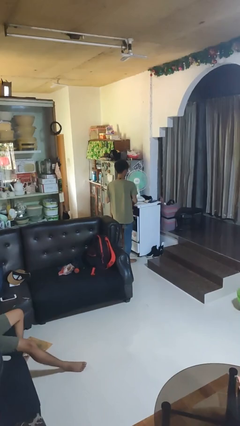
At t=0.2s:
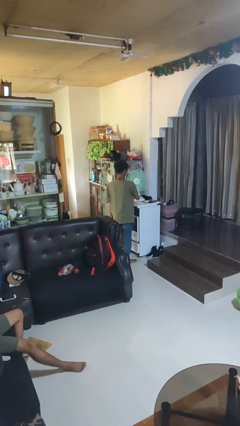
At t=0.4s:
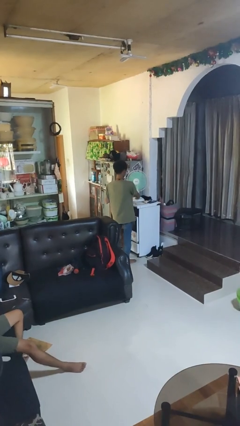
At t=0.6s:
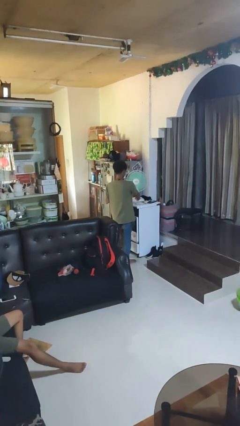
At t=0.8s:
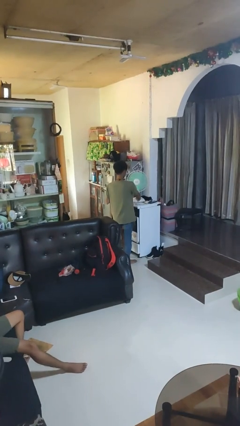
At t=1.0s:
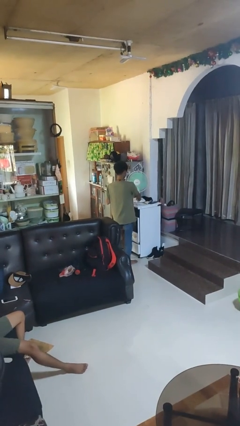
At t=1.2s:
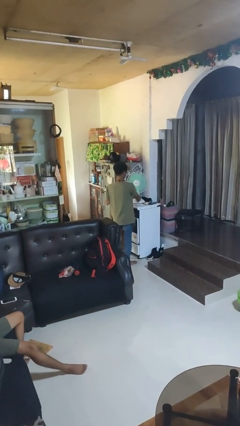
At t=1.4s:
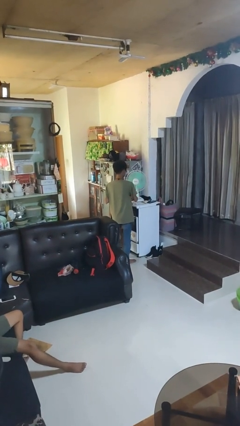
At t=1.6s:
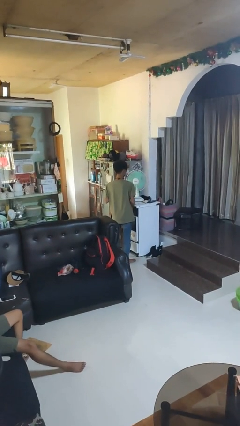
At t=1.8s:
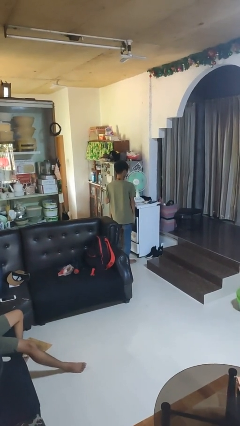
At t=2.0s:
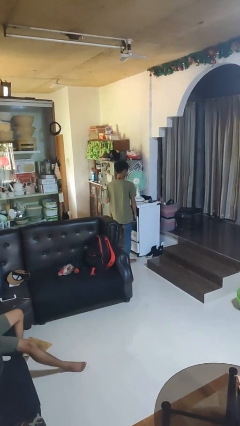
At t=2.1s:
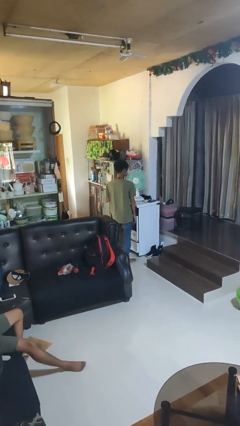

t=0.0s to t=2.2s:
person turns off fan

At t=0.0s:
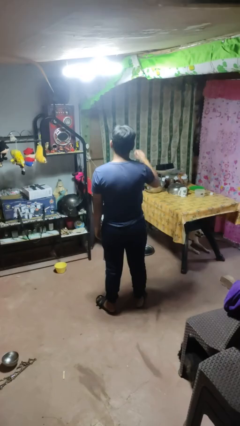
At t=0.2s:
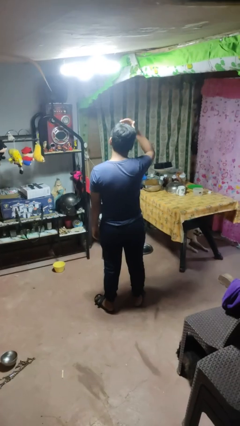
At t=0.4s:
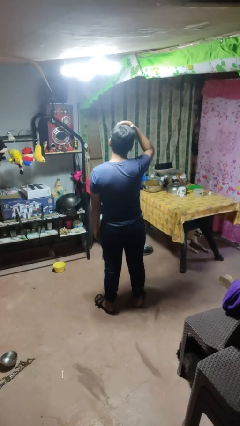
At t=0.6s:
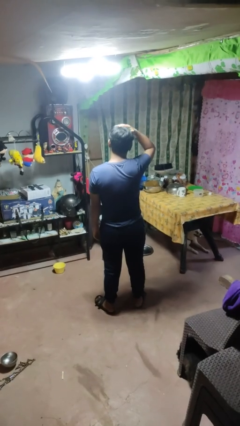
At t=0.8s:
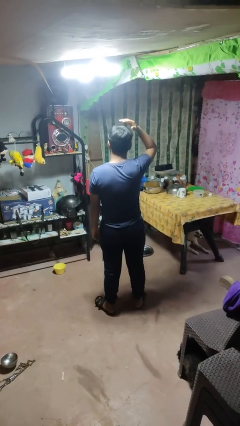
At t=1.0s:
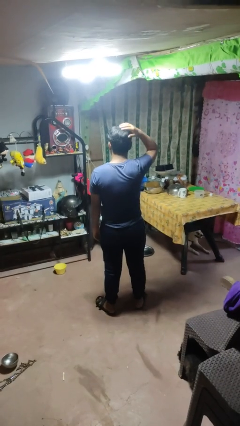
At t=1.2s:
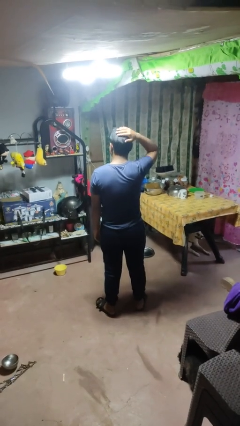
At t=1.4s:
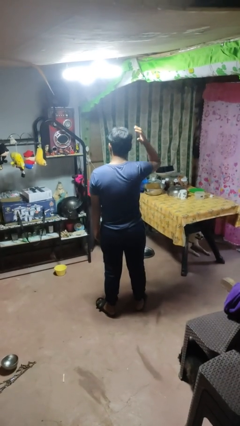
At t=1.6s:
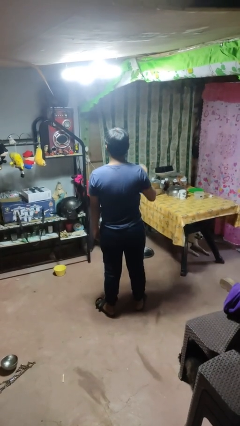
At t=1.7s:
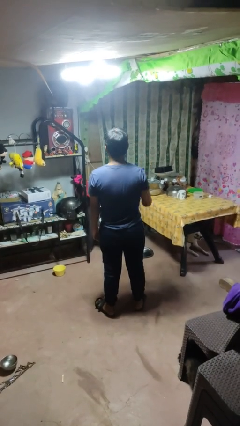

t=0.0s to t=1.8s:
person pats head

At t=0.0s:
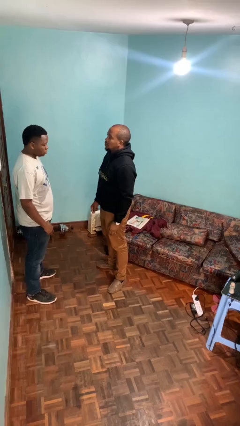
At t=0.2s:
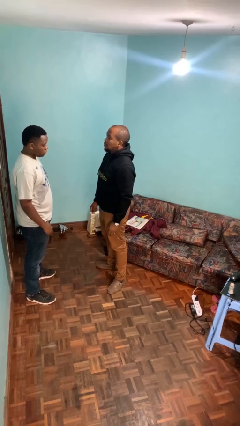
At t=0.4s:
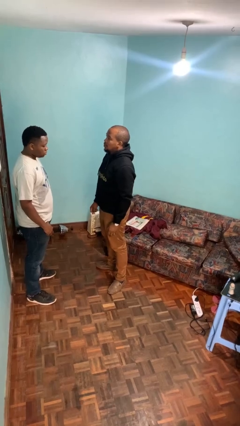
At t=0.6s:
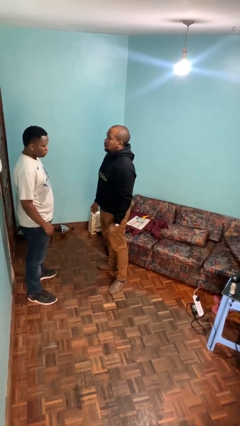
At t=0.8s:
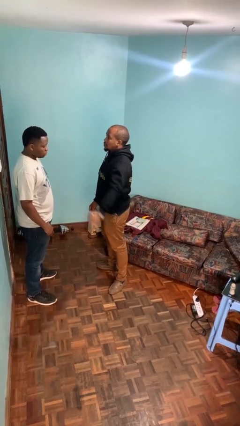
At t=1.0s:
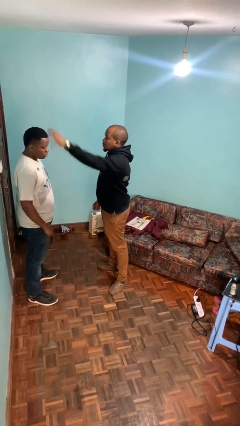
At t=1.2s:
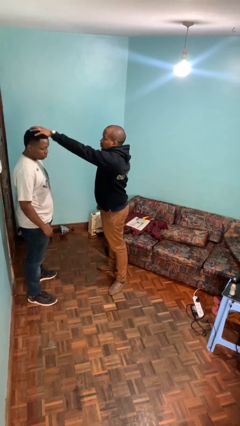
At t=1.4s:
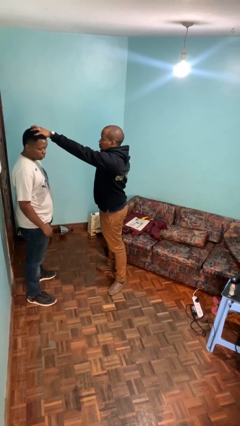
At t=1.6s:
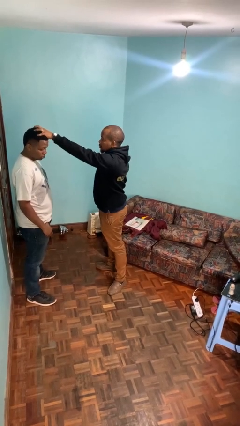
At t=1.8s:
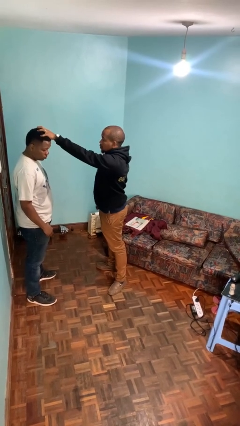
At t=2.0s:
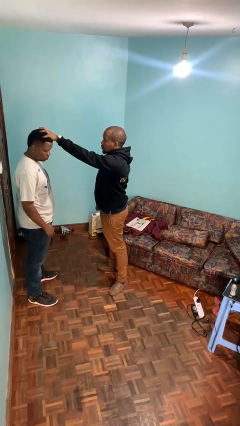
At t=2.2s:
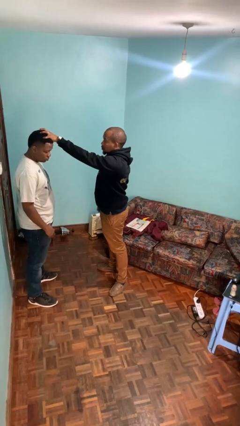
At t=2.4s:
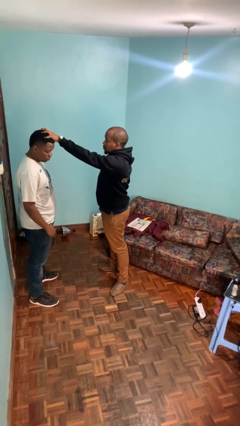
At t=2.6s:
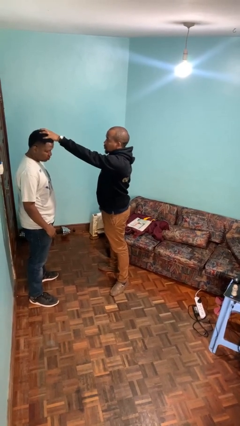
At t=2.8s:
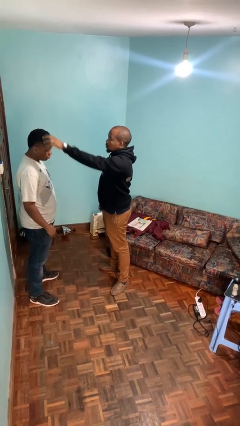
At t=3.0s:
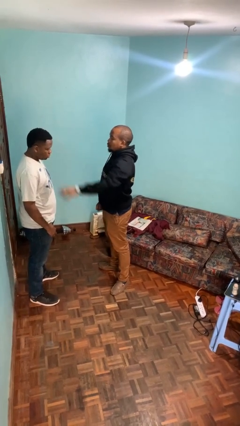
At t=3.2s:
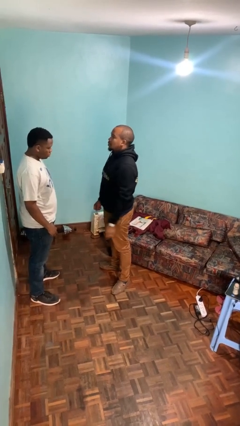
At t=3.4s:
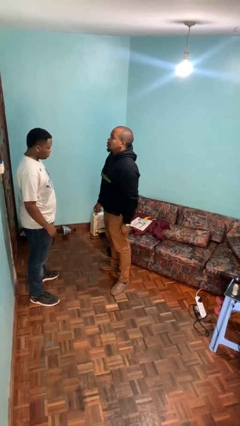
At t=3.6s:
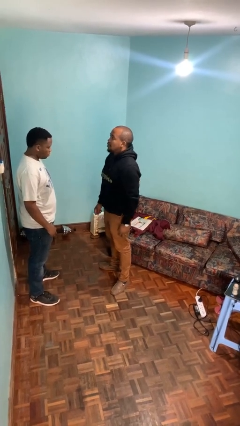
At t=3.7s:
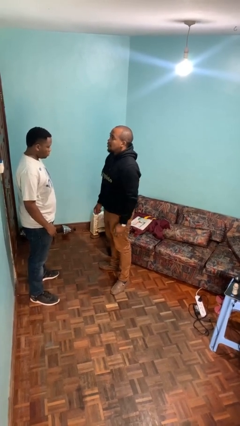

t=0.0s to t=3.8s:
person grabs person by hair

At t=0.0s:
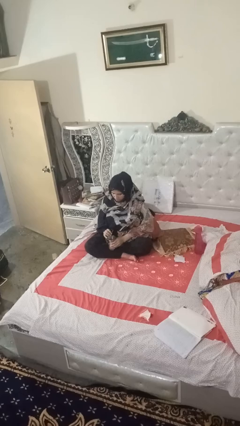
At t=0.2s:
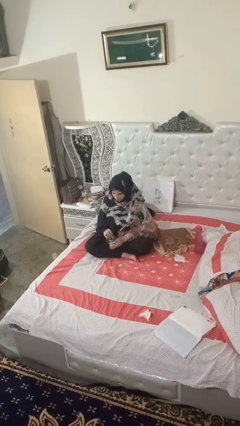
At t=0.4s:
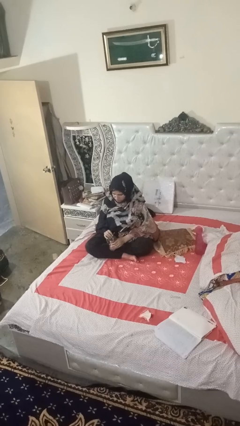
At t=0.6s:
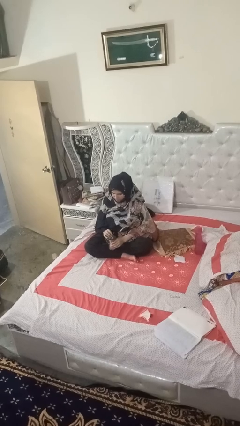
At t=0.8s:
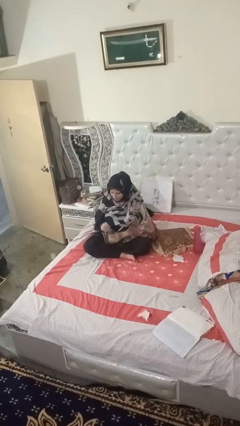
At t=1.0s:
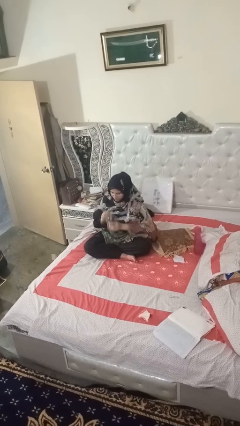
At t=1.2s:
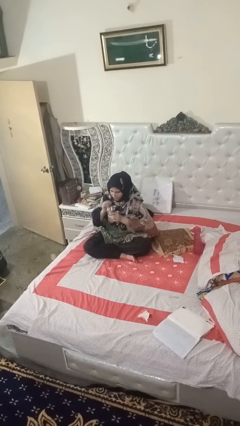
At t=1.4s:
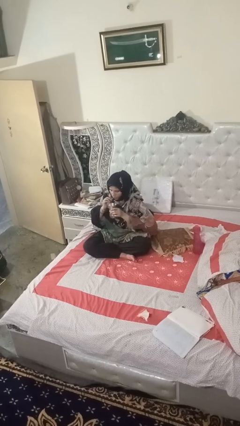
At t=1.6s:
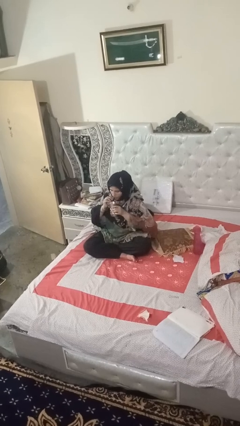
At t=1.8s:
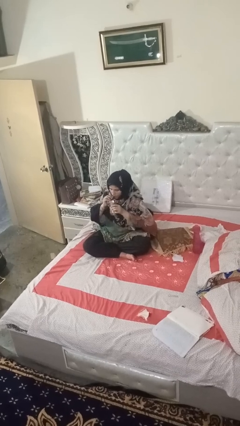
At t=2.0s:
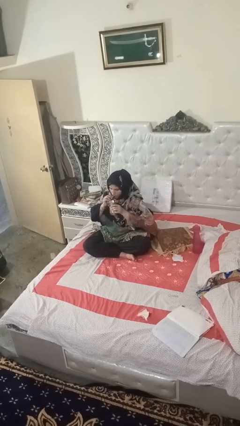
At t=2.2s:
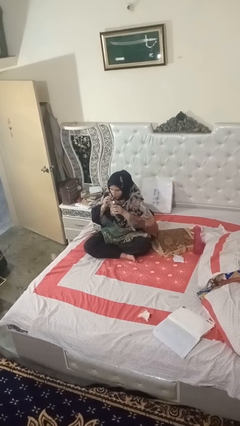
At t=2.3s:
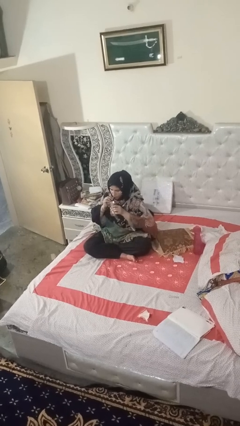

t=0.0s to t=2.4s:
person drinks from straw

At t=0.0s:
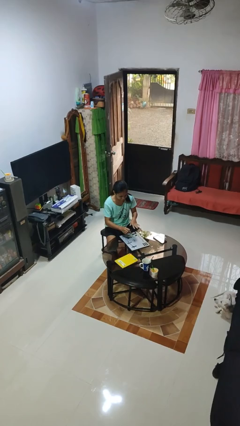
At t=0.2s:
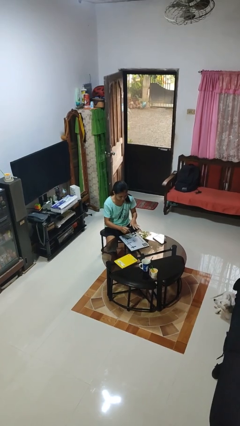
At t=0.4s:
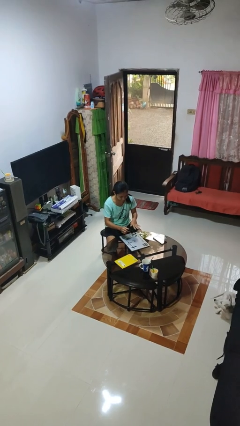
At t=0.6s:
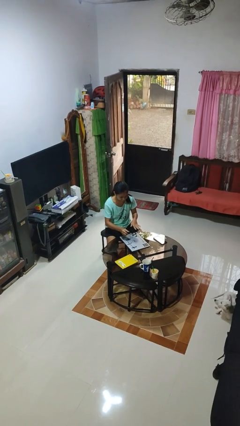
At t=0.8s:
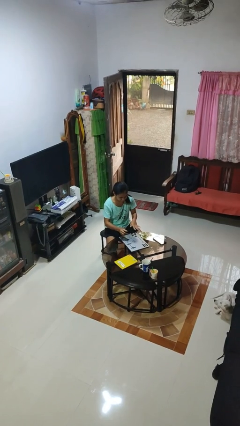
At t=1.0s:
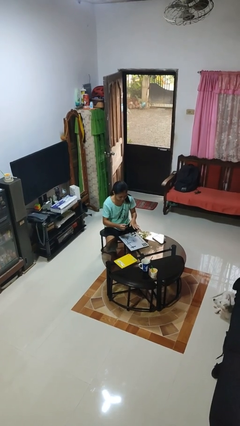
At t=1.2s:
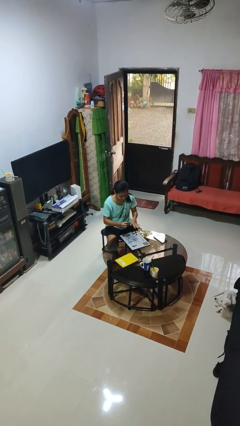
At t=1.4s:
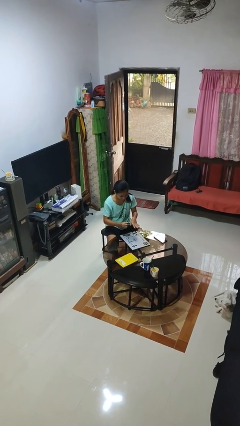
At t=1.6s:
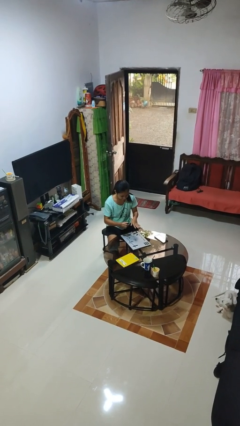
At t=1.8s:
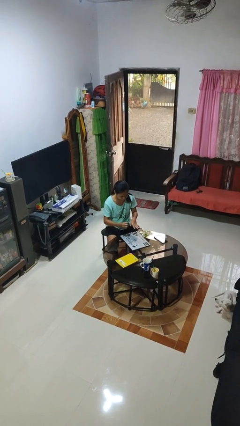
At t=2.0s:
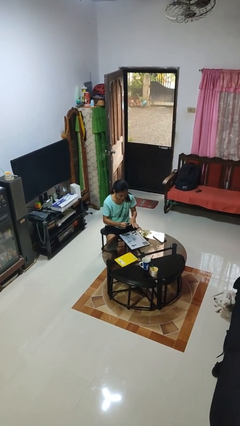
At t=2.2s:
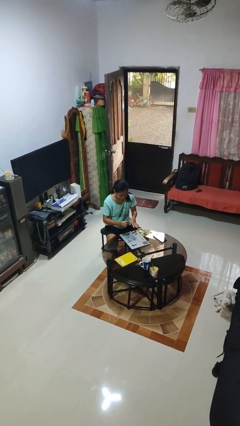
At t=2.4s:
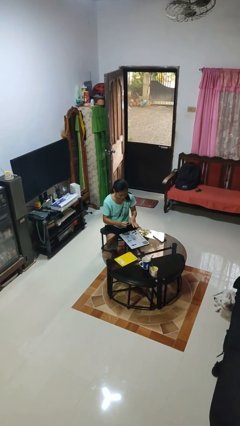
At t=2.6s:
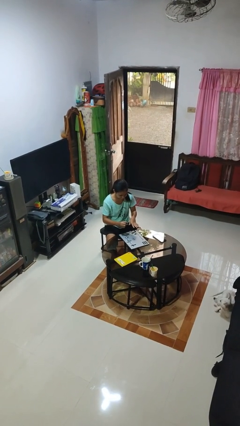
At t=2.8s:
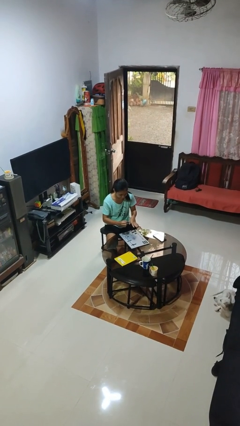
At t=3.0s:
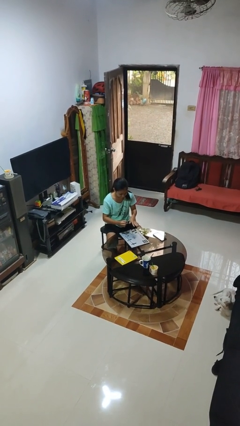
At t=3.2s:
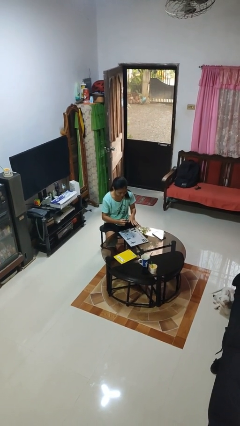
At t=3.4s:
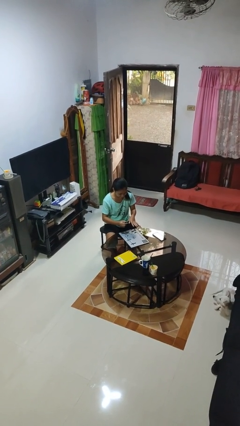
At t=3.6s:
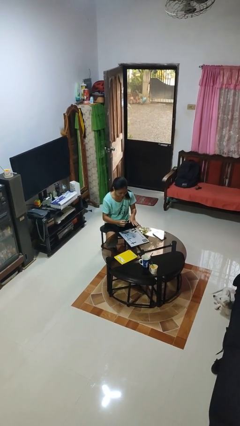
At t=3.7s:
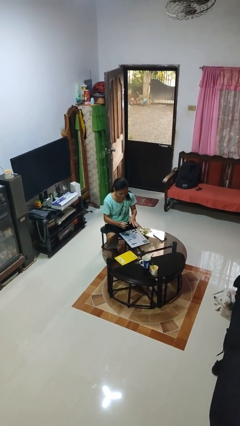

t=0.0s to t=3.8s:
person paints fingernails

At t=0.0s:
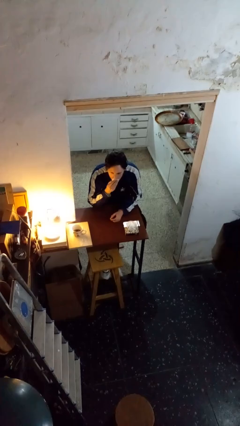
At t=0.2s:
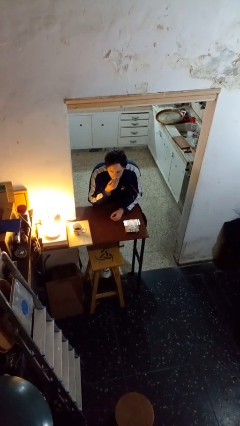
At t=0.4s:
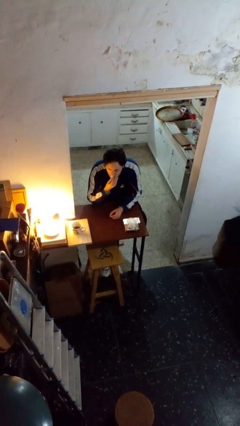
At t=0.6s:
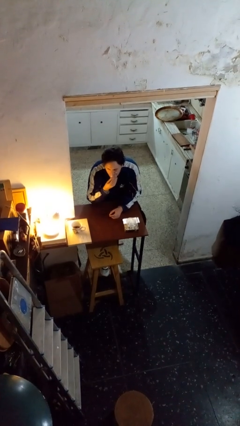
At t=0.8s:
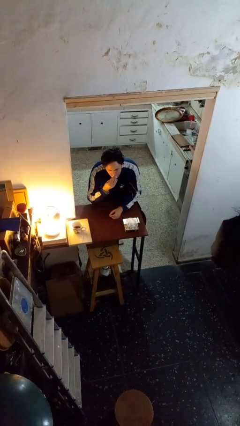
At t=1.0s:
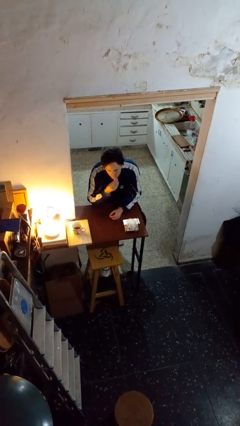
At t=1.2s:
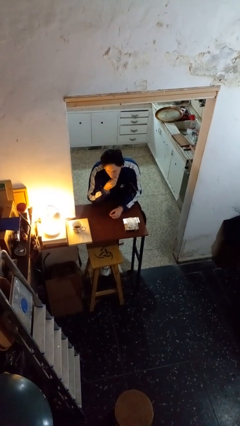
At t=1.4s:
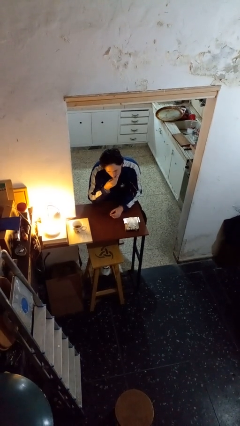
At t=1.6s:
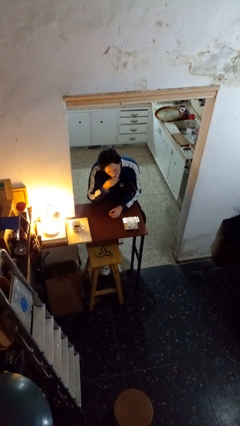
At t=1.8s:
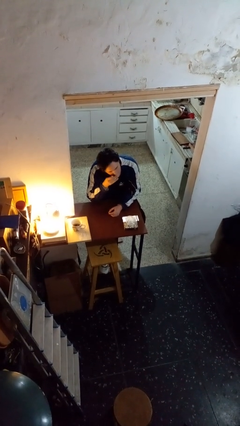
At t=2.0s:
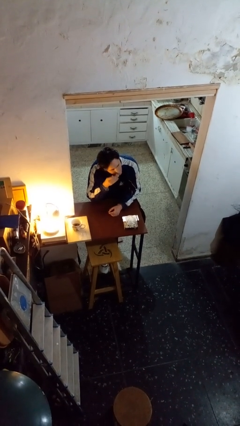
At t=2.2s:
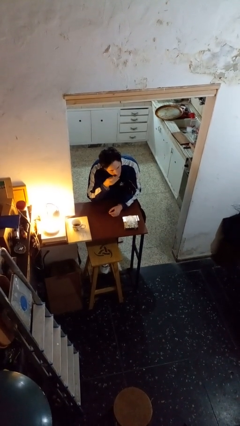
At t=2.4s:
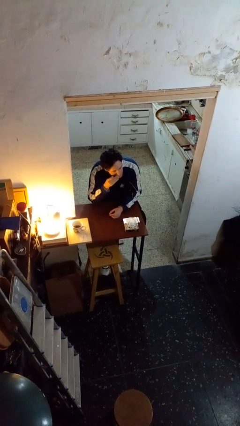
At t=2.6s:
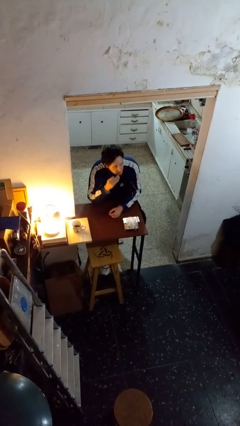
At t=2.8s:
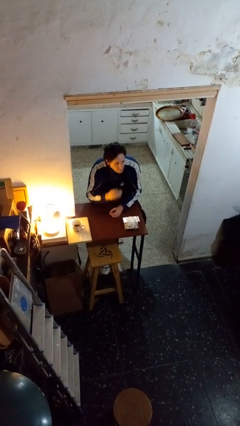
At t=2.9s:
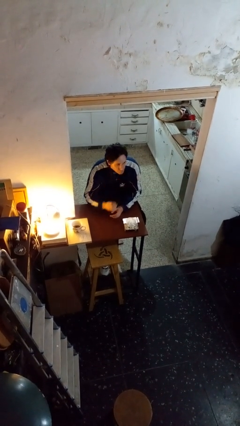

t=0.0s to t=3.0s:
person wipes mouth with napkin
